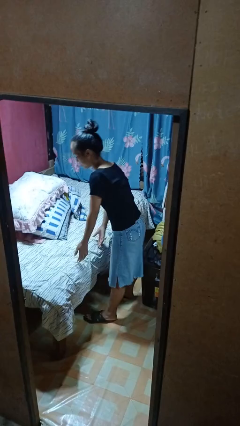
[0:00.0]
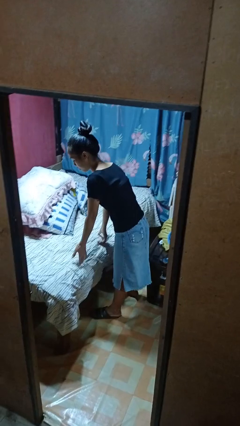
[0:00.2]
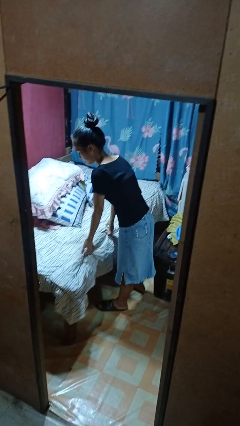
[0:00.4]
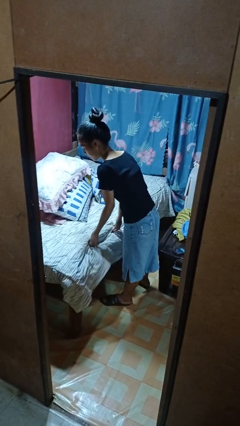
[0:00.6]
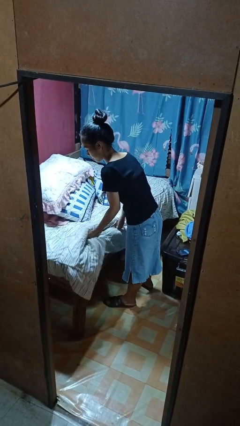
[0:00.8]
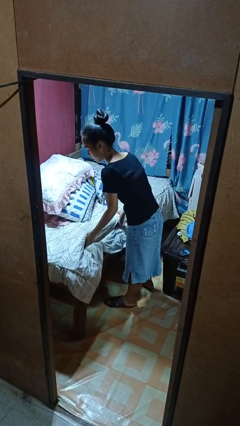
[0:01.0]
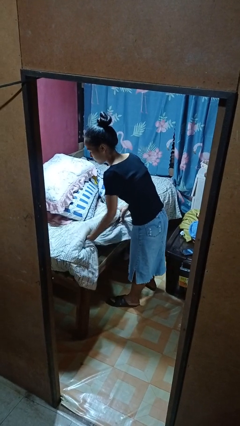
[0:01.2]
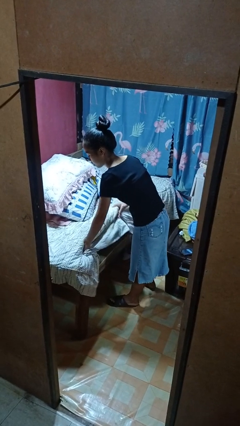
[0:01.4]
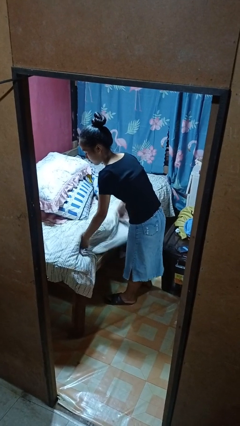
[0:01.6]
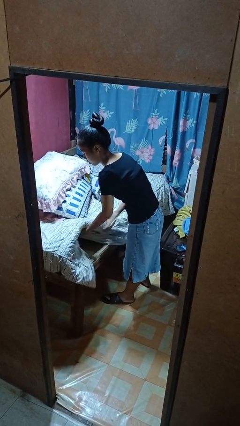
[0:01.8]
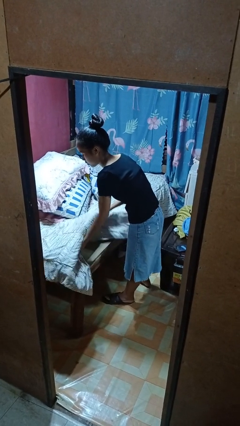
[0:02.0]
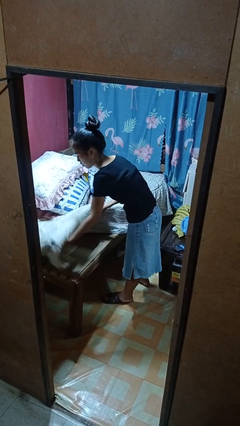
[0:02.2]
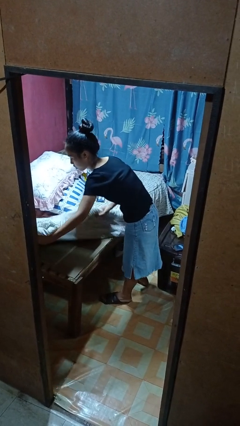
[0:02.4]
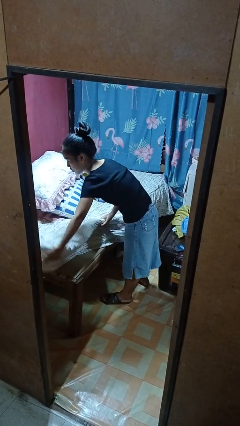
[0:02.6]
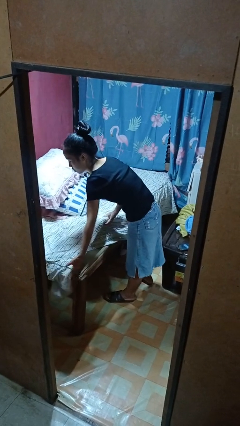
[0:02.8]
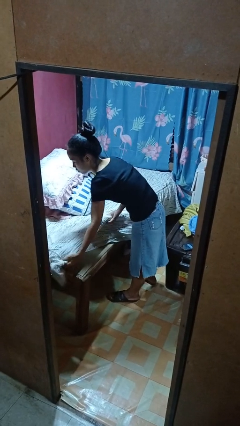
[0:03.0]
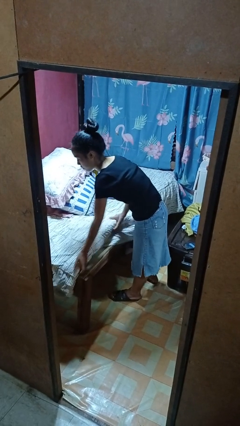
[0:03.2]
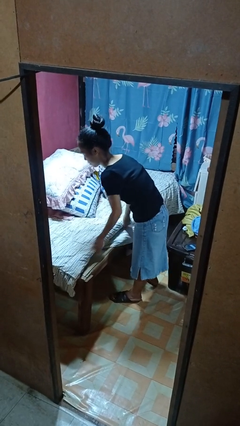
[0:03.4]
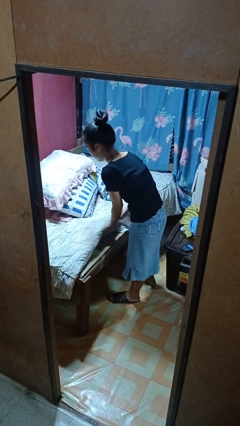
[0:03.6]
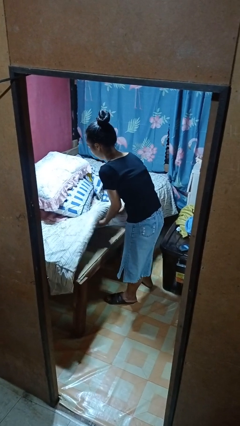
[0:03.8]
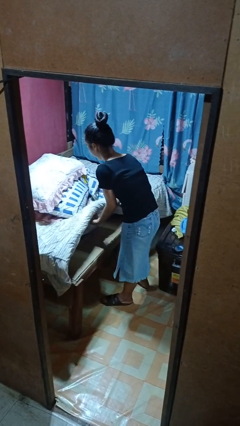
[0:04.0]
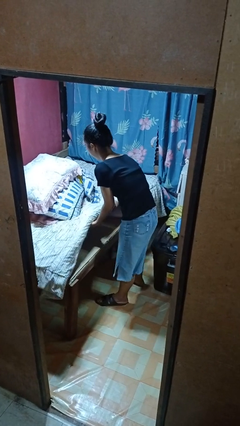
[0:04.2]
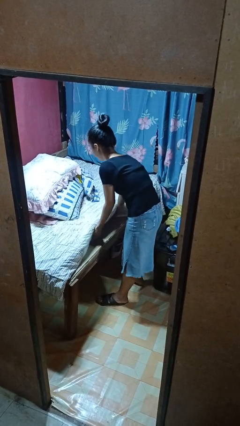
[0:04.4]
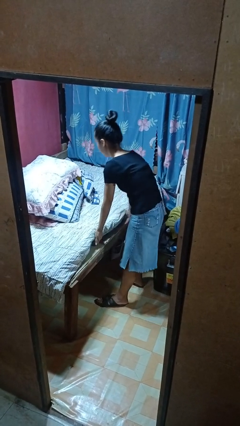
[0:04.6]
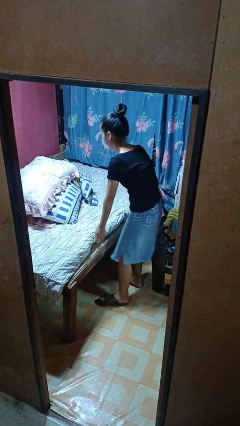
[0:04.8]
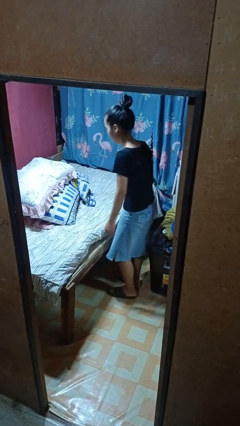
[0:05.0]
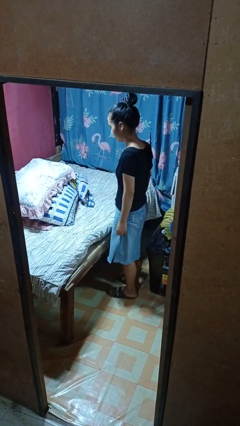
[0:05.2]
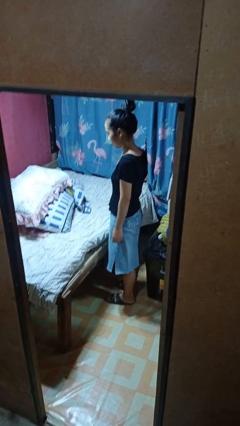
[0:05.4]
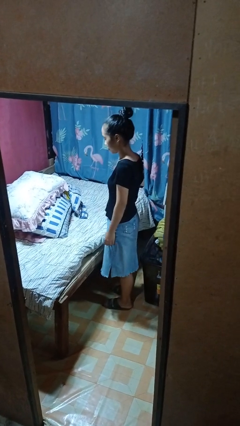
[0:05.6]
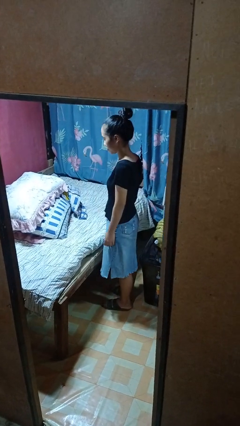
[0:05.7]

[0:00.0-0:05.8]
person makes bed

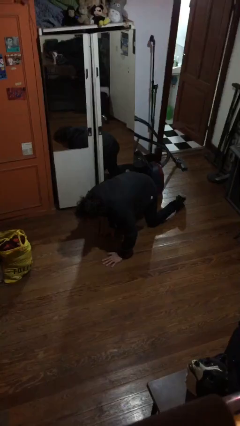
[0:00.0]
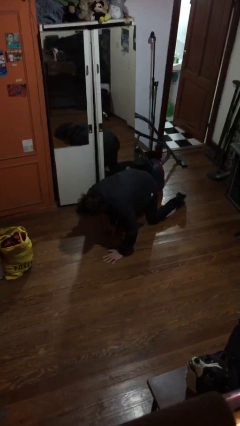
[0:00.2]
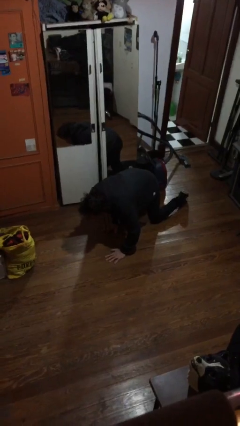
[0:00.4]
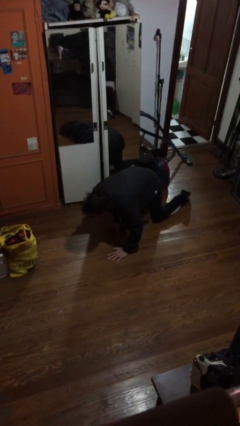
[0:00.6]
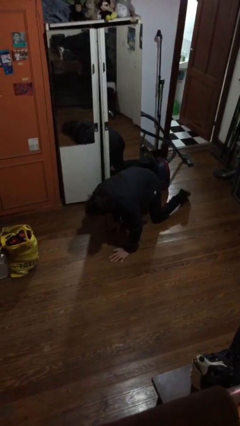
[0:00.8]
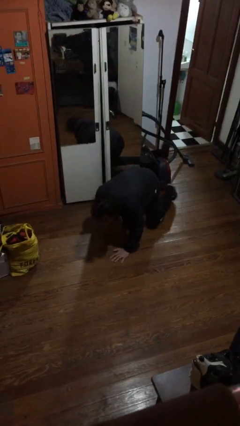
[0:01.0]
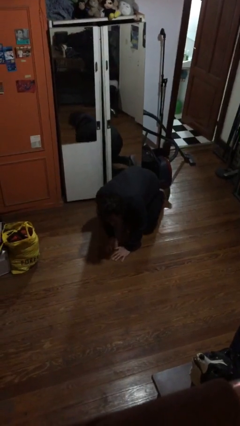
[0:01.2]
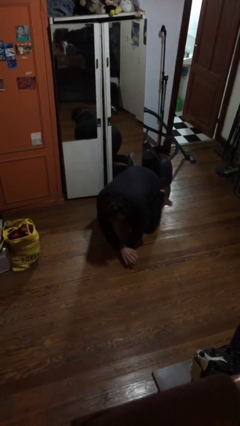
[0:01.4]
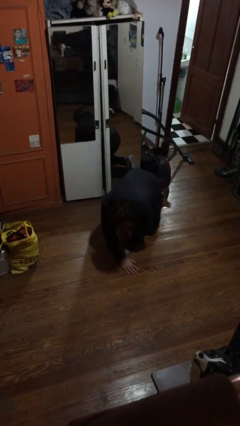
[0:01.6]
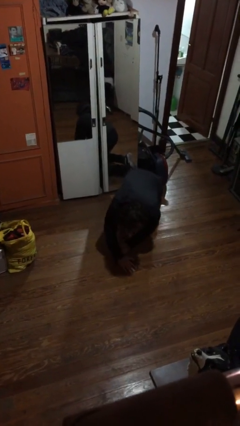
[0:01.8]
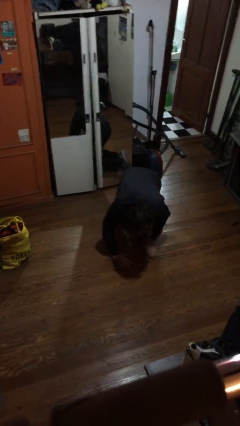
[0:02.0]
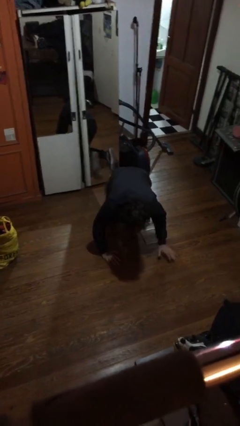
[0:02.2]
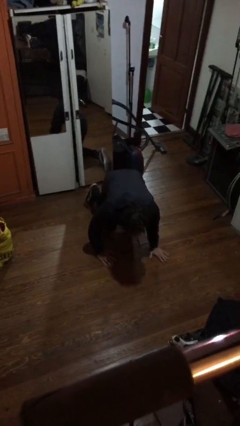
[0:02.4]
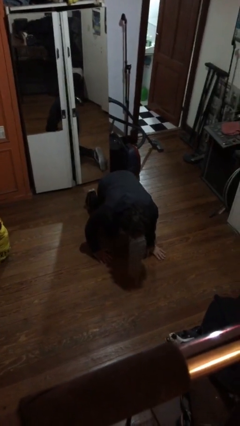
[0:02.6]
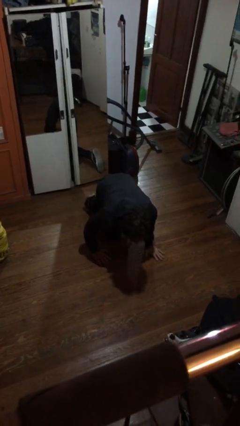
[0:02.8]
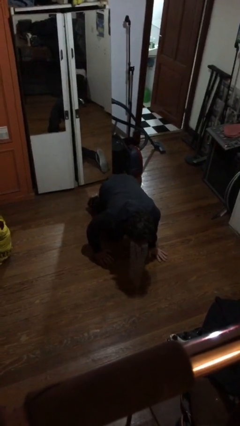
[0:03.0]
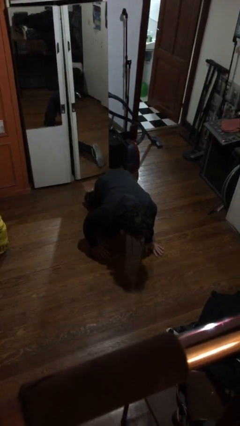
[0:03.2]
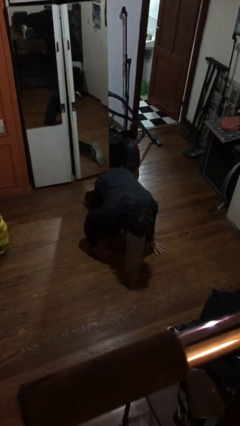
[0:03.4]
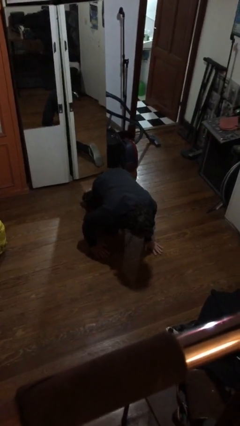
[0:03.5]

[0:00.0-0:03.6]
person crawls

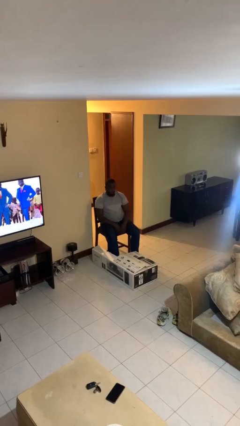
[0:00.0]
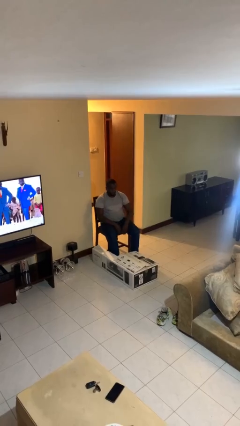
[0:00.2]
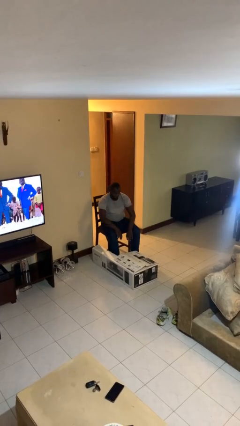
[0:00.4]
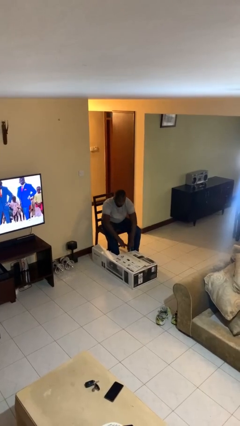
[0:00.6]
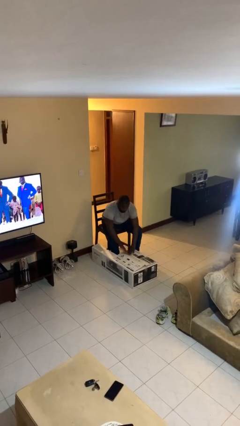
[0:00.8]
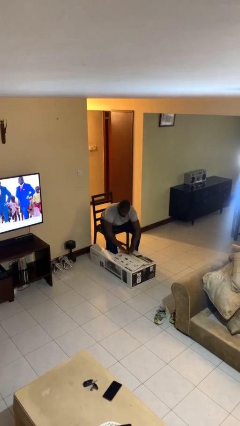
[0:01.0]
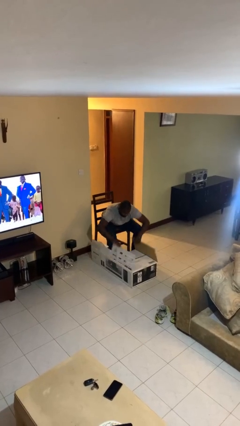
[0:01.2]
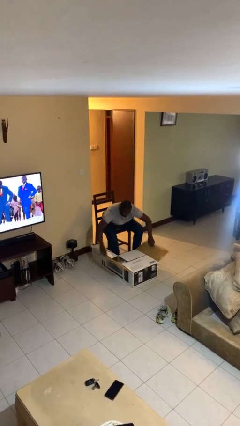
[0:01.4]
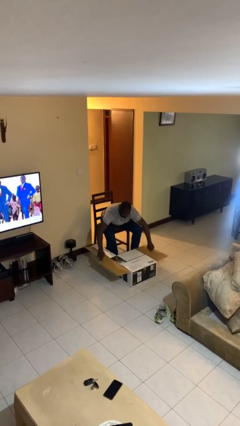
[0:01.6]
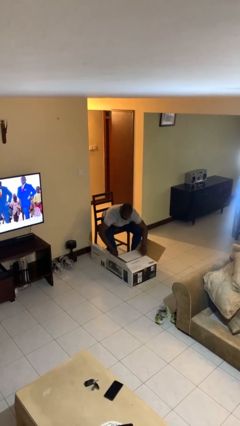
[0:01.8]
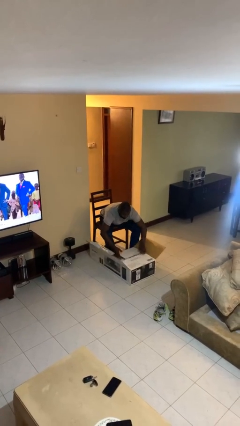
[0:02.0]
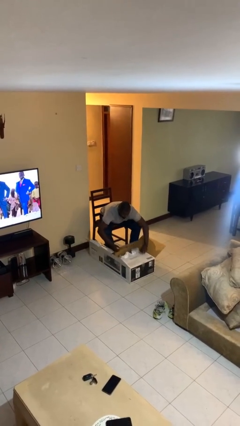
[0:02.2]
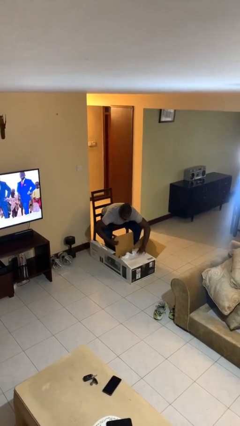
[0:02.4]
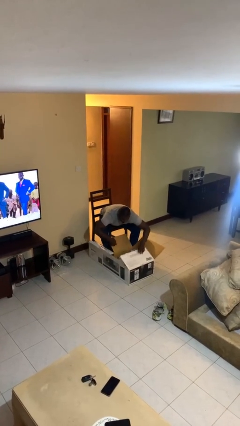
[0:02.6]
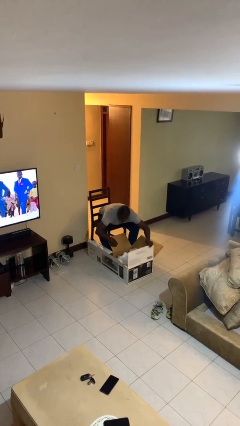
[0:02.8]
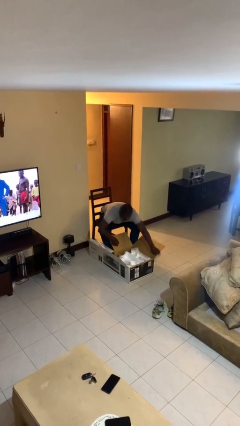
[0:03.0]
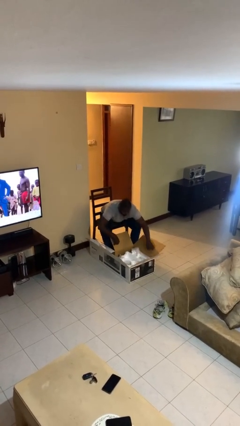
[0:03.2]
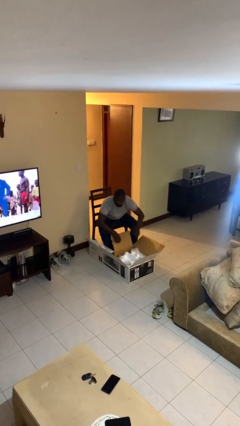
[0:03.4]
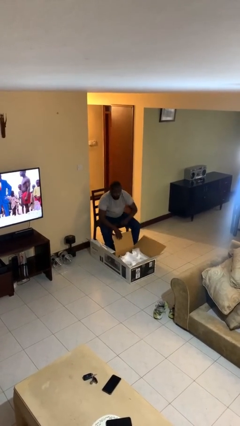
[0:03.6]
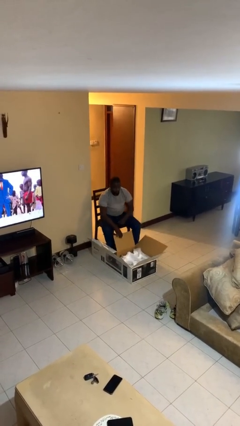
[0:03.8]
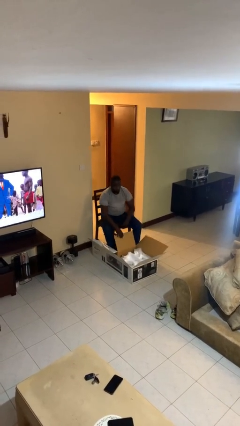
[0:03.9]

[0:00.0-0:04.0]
person opens box

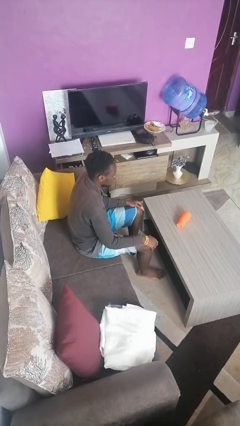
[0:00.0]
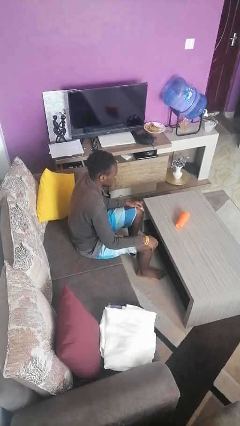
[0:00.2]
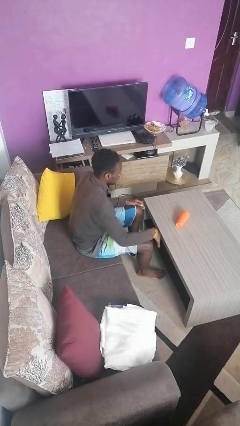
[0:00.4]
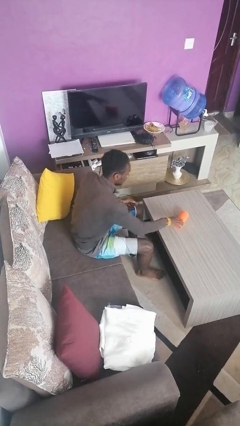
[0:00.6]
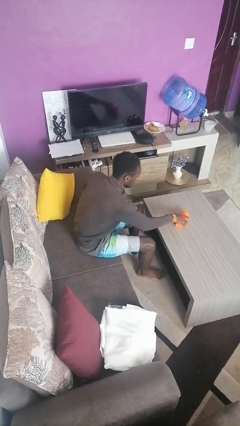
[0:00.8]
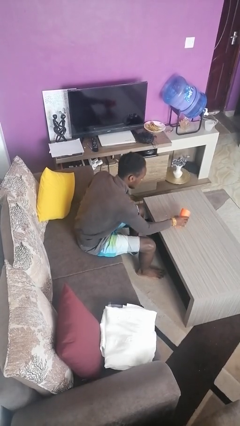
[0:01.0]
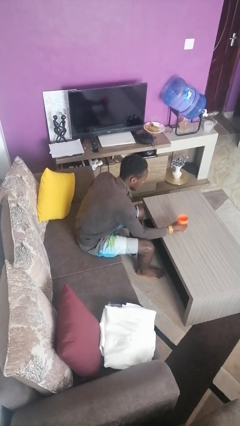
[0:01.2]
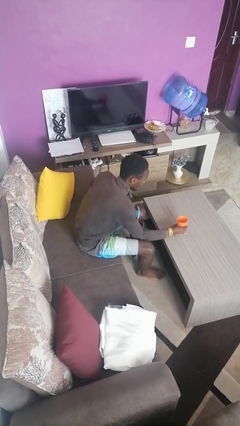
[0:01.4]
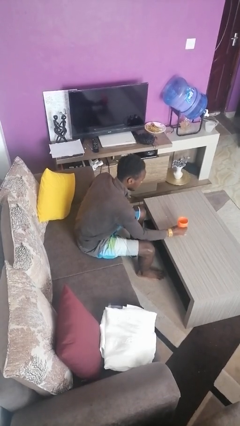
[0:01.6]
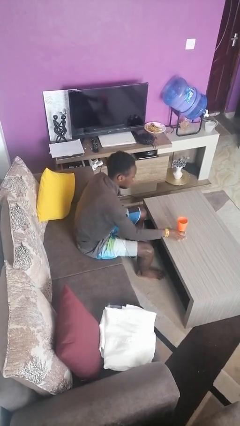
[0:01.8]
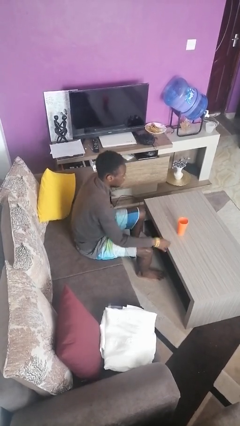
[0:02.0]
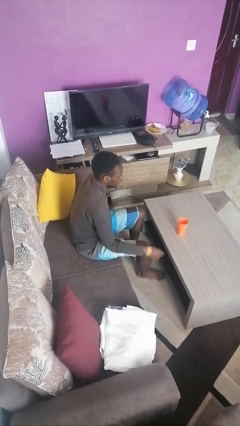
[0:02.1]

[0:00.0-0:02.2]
person sets upright glass

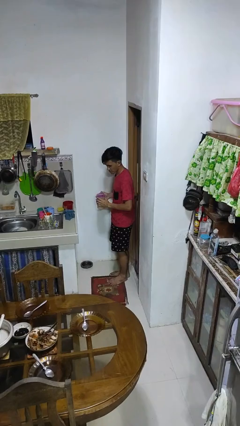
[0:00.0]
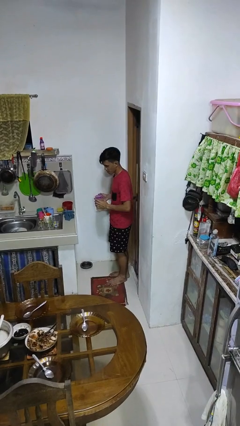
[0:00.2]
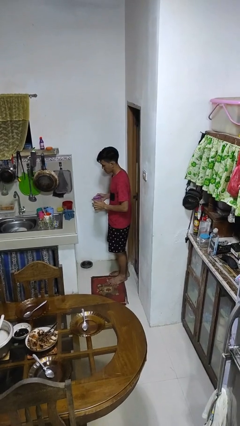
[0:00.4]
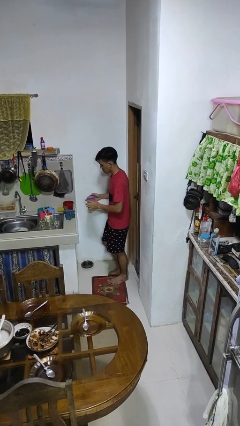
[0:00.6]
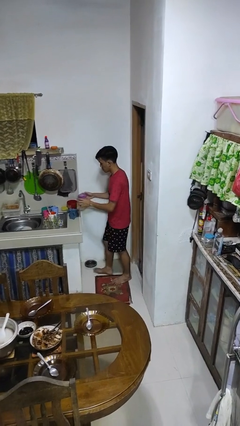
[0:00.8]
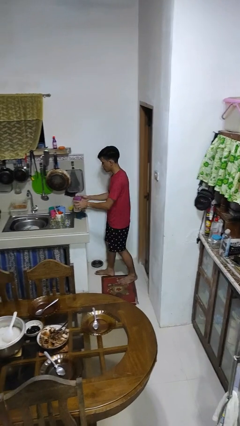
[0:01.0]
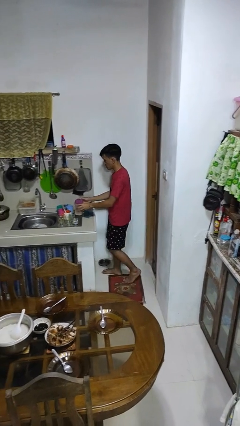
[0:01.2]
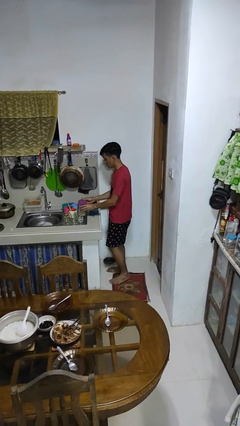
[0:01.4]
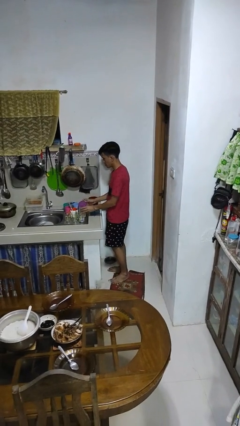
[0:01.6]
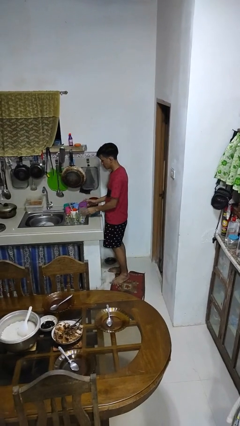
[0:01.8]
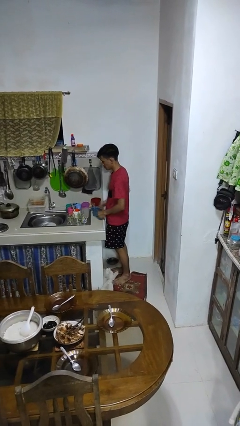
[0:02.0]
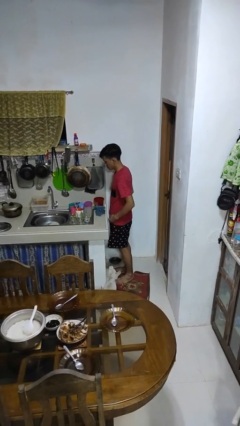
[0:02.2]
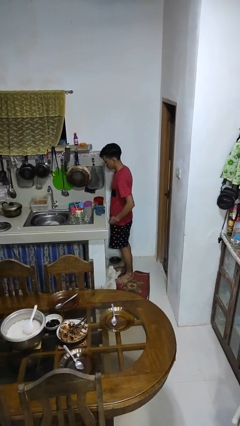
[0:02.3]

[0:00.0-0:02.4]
person puts down object on countertop
